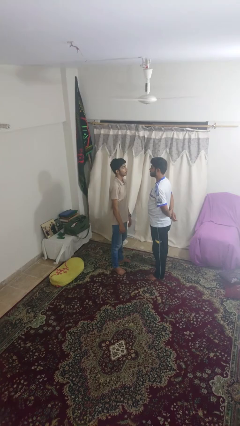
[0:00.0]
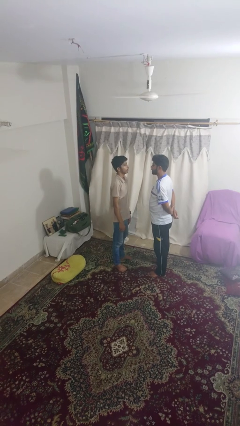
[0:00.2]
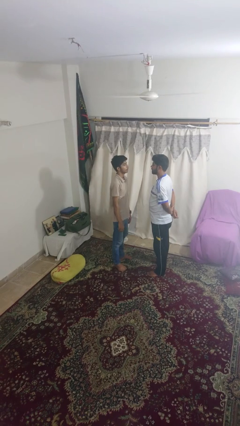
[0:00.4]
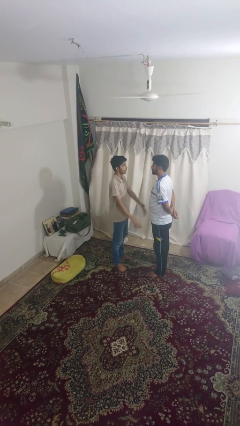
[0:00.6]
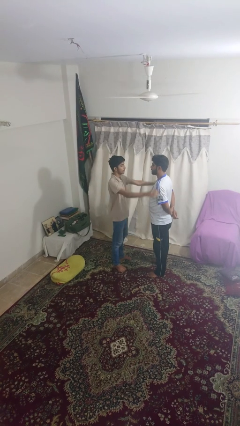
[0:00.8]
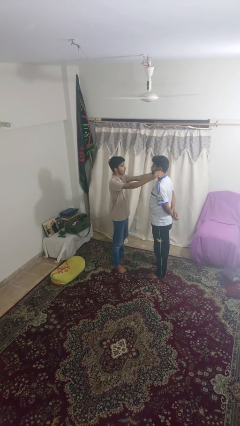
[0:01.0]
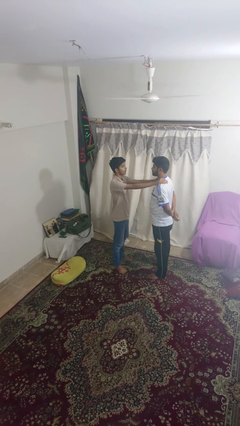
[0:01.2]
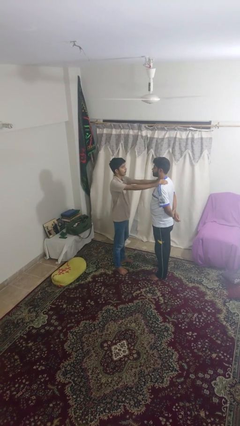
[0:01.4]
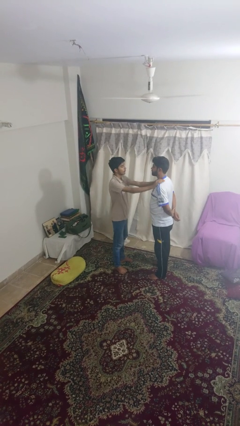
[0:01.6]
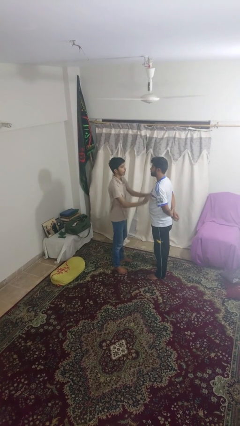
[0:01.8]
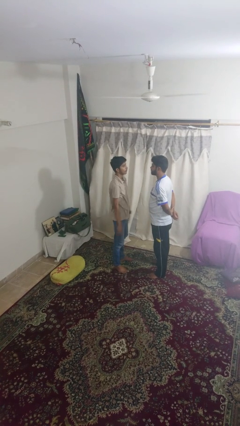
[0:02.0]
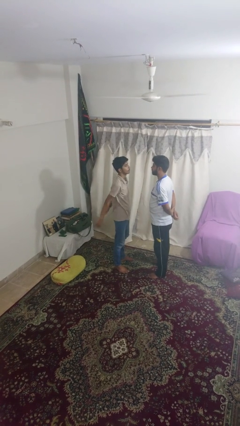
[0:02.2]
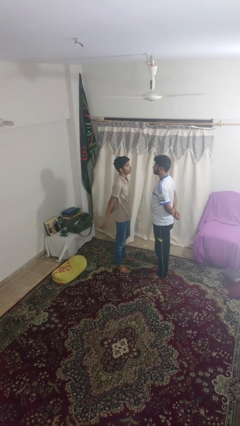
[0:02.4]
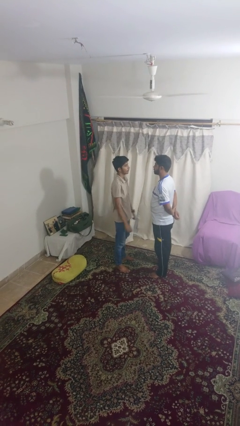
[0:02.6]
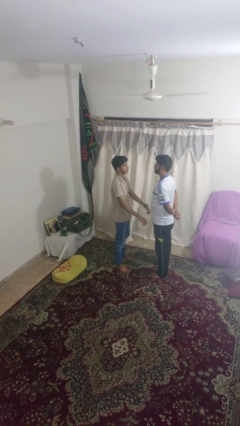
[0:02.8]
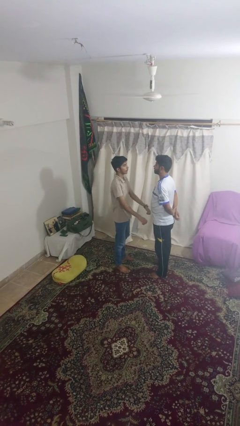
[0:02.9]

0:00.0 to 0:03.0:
person pounds shoulders of person

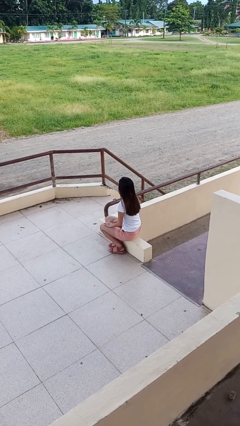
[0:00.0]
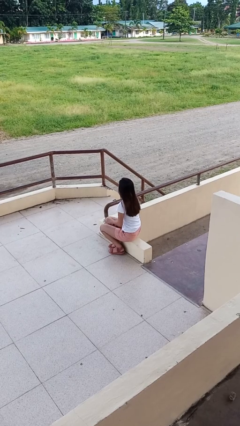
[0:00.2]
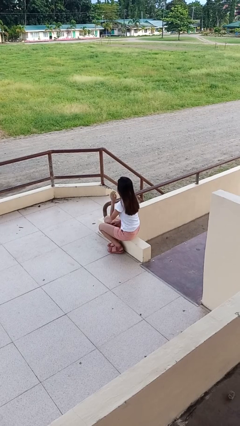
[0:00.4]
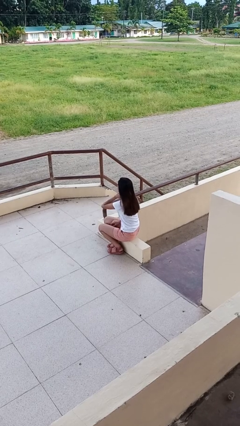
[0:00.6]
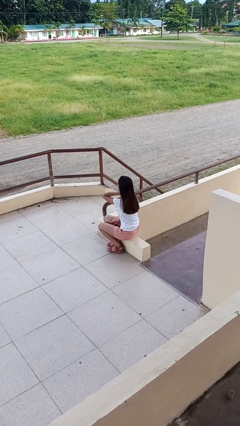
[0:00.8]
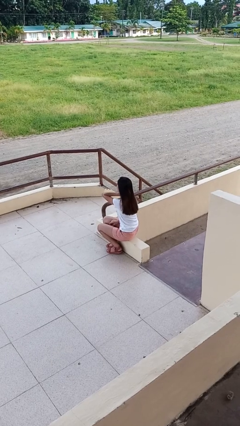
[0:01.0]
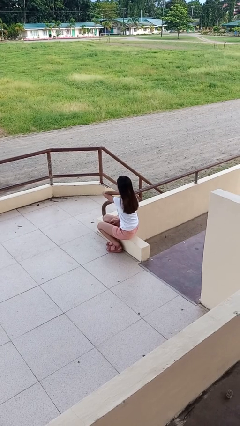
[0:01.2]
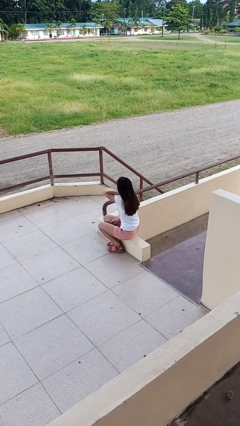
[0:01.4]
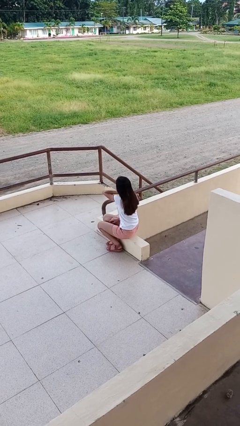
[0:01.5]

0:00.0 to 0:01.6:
person rubs neck

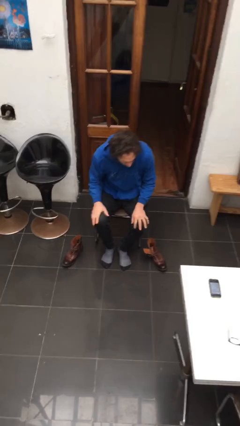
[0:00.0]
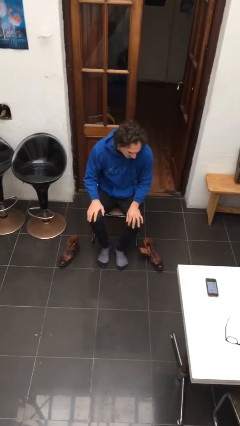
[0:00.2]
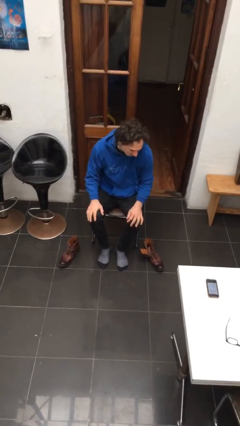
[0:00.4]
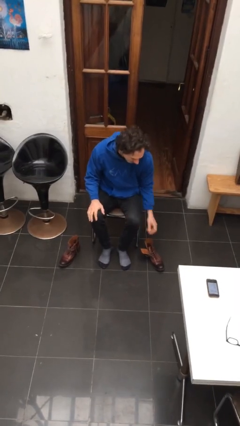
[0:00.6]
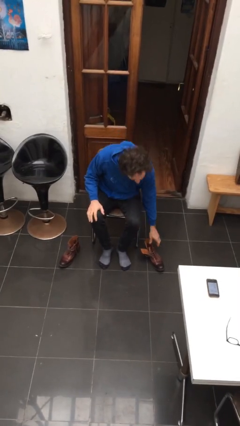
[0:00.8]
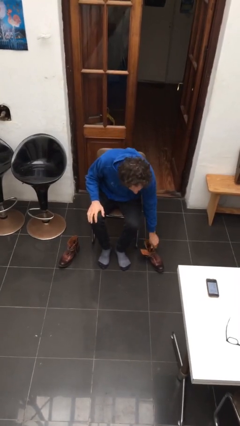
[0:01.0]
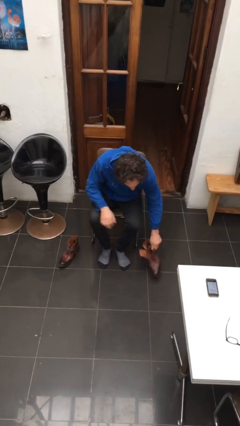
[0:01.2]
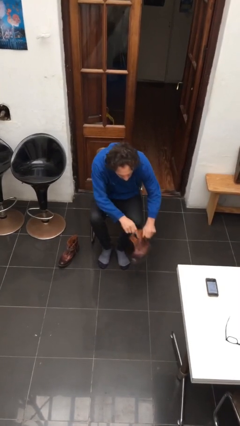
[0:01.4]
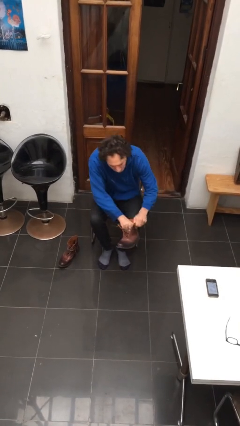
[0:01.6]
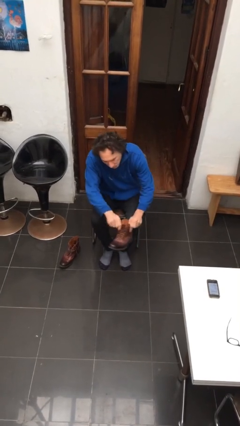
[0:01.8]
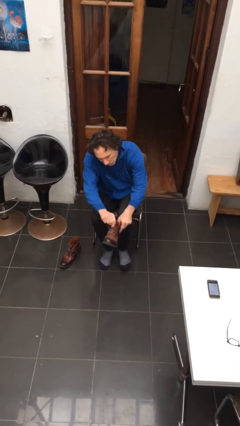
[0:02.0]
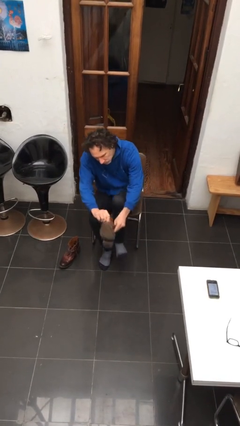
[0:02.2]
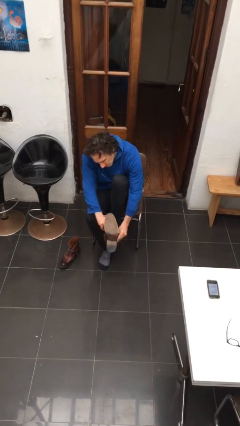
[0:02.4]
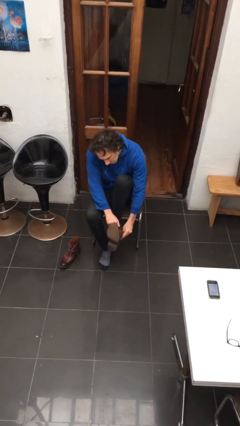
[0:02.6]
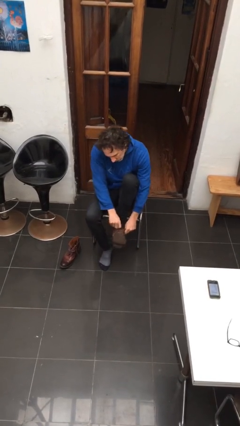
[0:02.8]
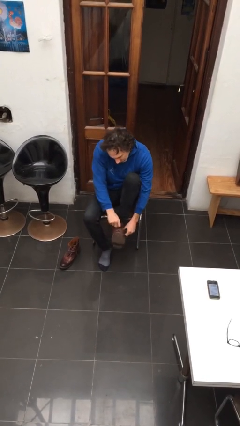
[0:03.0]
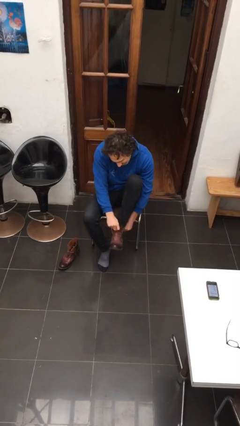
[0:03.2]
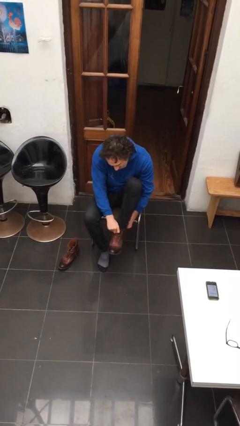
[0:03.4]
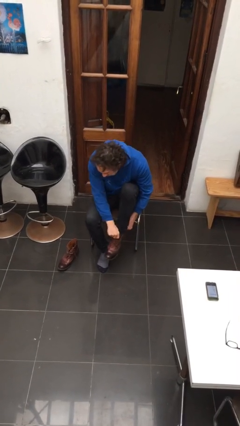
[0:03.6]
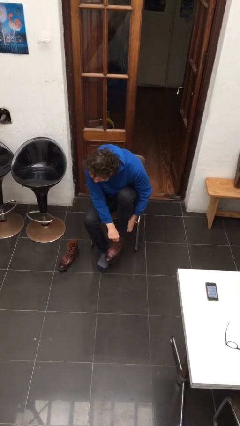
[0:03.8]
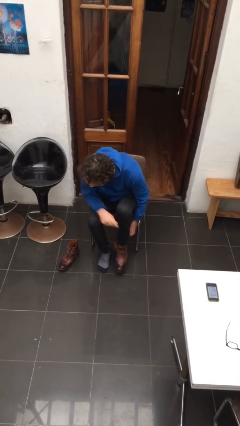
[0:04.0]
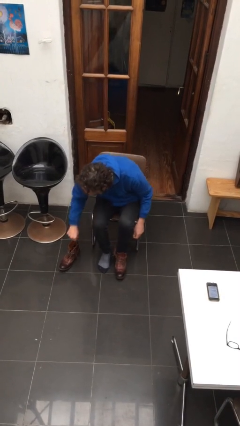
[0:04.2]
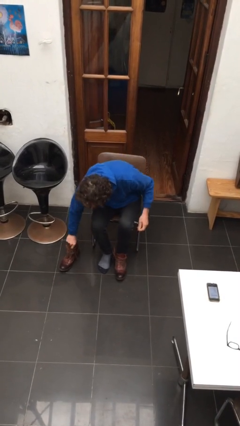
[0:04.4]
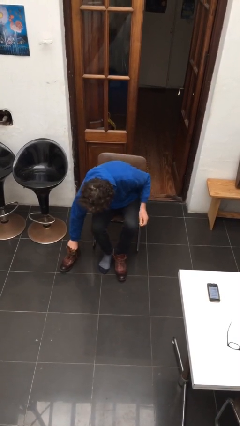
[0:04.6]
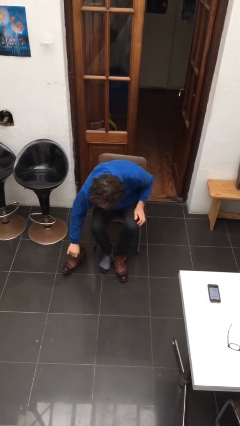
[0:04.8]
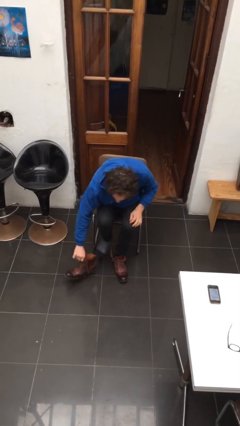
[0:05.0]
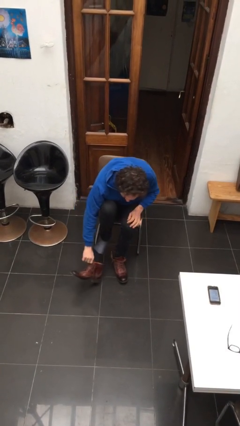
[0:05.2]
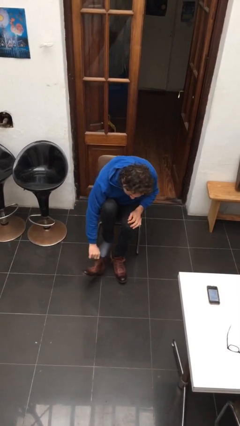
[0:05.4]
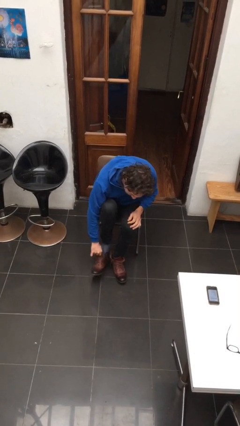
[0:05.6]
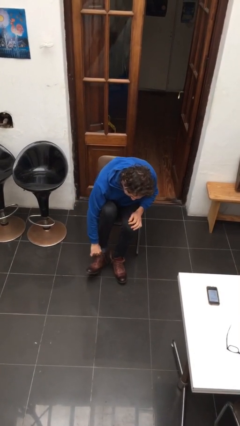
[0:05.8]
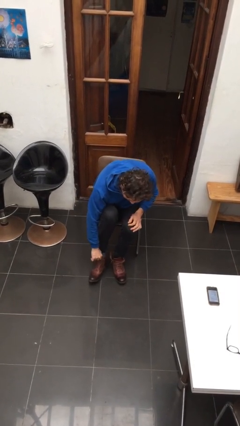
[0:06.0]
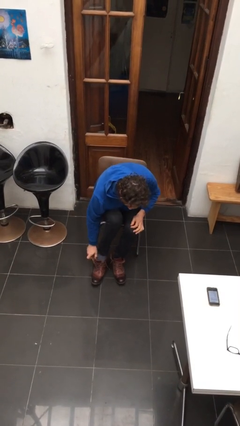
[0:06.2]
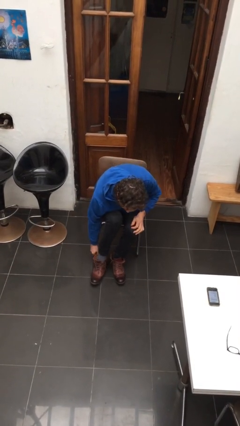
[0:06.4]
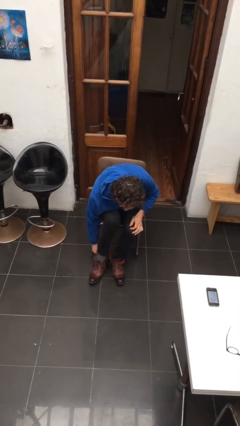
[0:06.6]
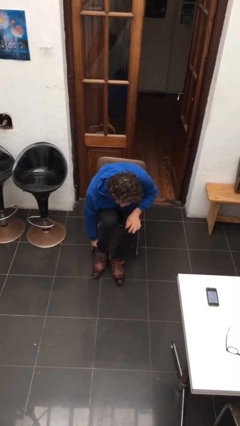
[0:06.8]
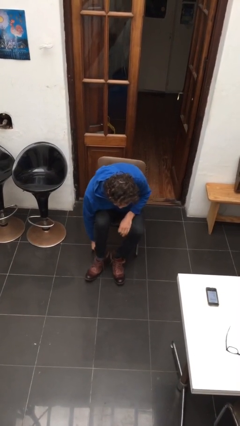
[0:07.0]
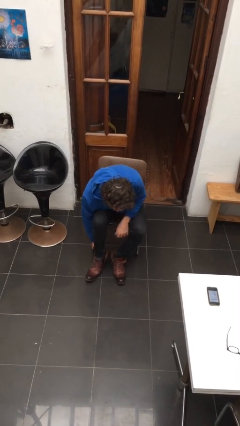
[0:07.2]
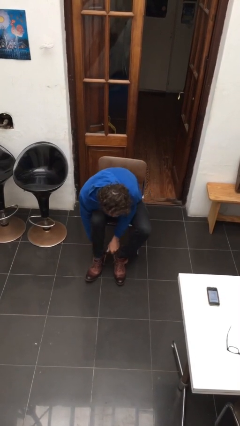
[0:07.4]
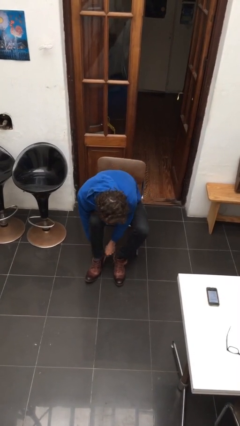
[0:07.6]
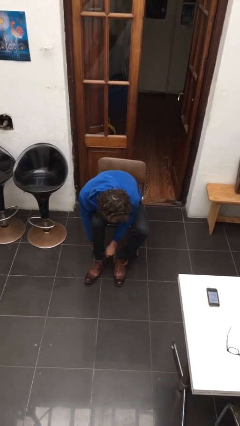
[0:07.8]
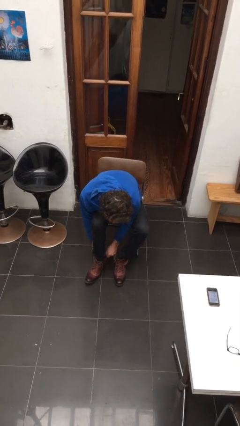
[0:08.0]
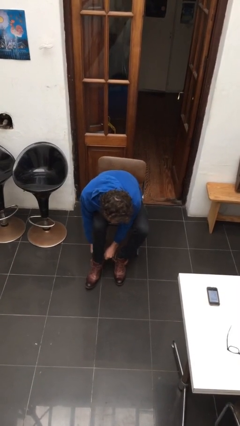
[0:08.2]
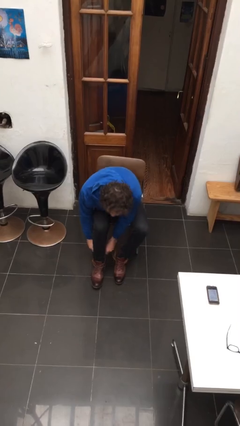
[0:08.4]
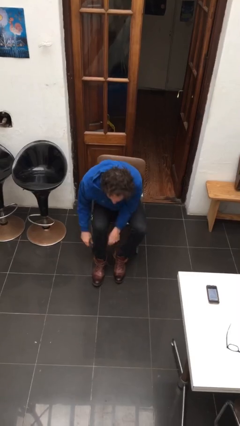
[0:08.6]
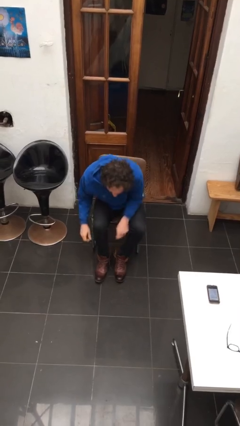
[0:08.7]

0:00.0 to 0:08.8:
person puts on boots

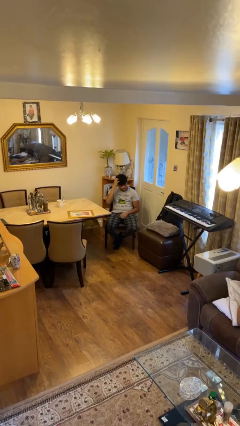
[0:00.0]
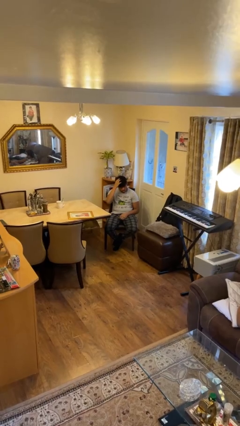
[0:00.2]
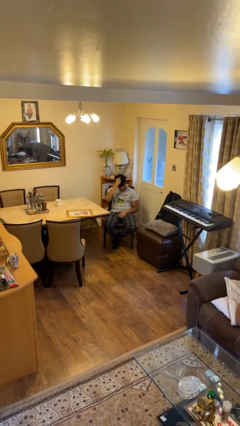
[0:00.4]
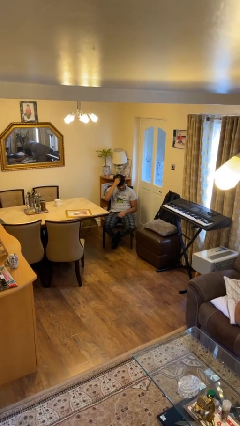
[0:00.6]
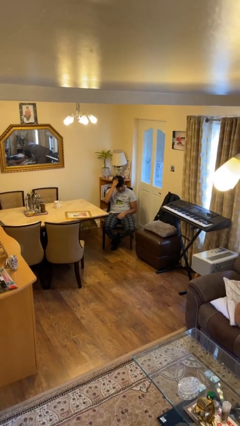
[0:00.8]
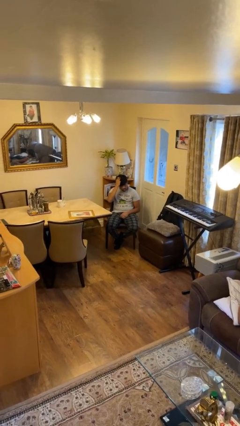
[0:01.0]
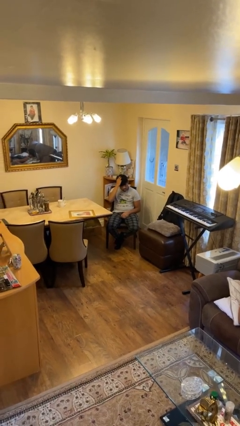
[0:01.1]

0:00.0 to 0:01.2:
person strokes hair

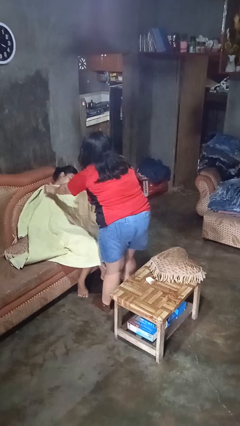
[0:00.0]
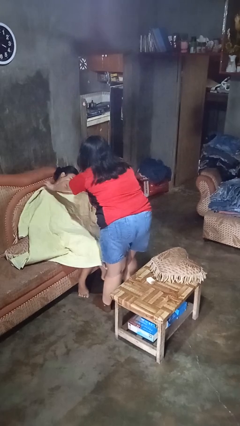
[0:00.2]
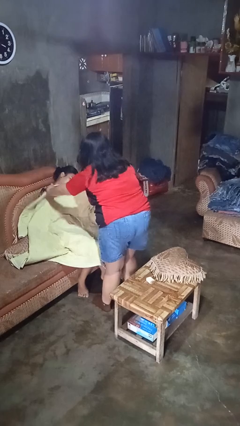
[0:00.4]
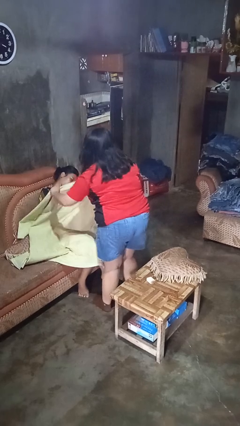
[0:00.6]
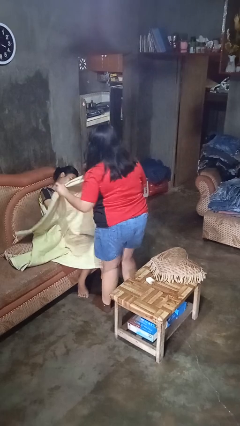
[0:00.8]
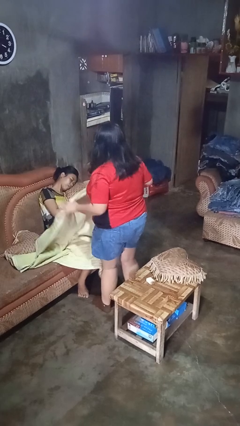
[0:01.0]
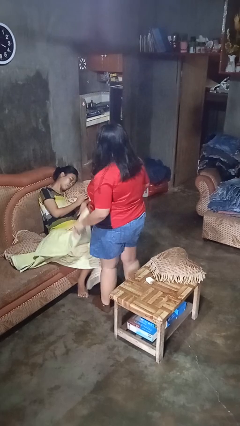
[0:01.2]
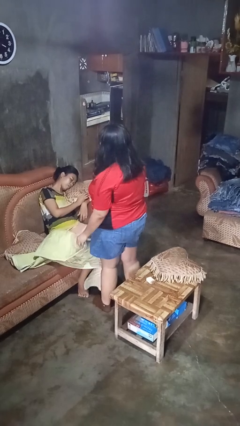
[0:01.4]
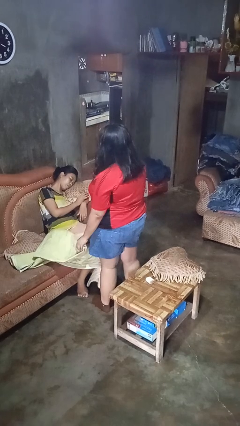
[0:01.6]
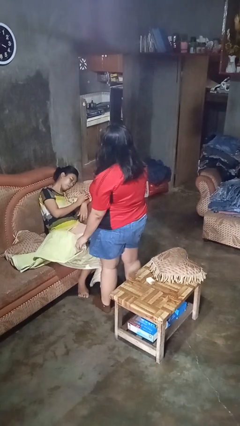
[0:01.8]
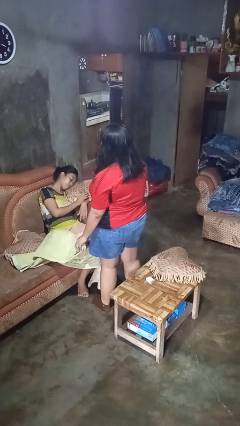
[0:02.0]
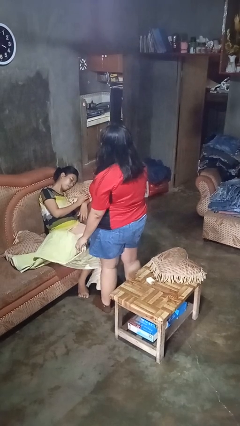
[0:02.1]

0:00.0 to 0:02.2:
person uncovers friend with blanket

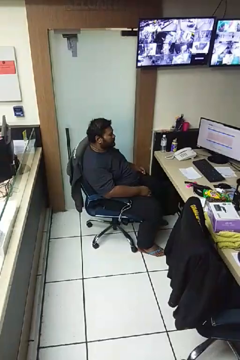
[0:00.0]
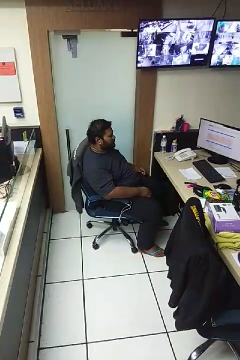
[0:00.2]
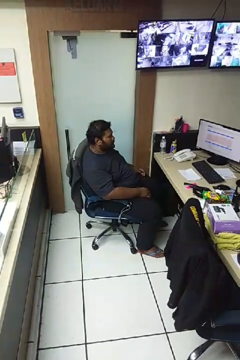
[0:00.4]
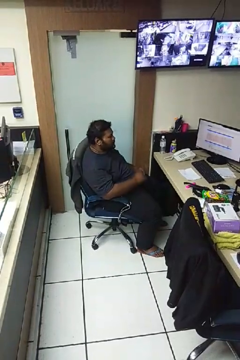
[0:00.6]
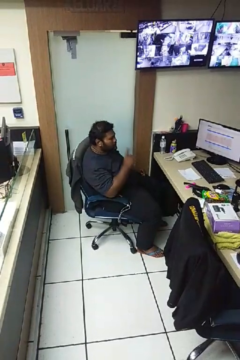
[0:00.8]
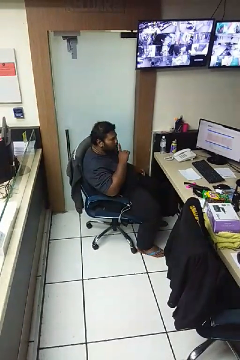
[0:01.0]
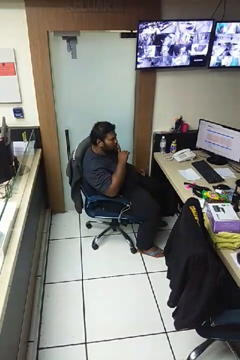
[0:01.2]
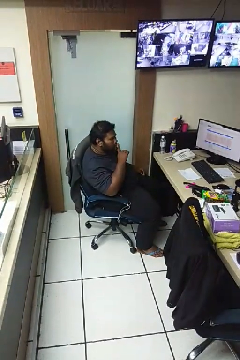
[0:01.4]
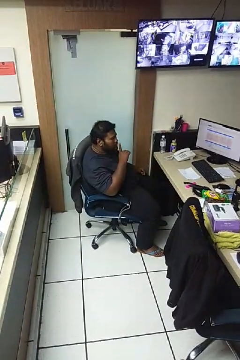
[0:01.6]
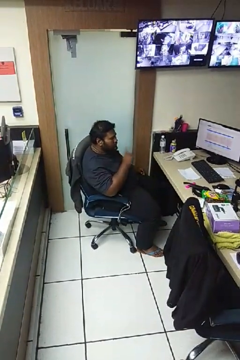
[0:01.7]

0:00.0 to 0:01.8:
person gestures be quiet
